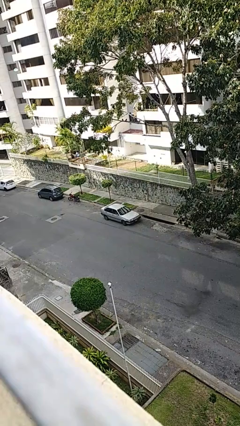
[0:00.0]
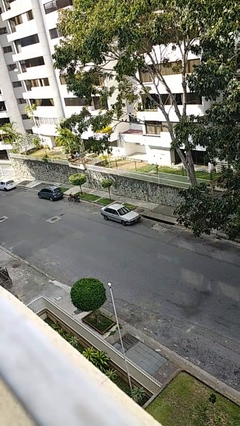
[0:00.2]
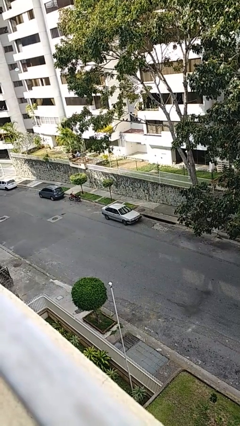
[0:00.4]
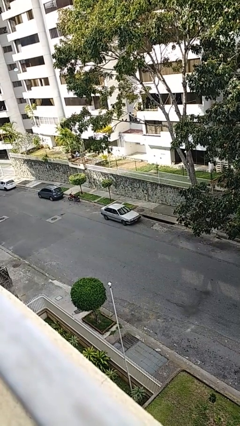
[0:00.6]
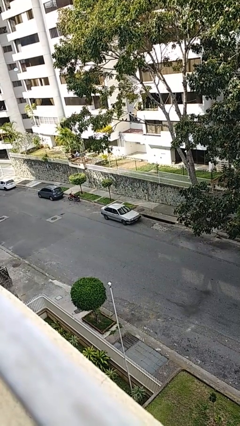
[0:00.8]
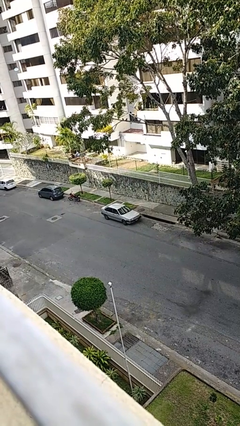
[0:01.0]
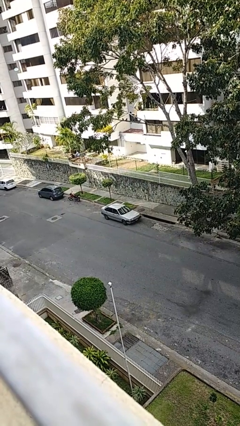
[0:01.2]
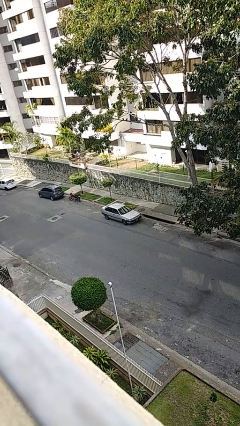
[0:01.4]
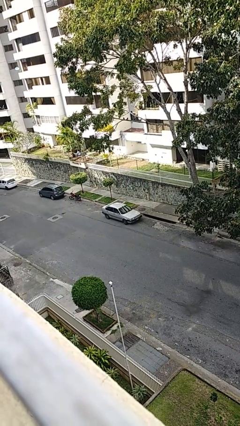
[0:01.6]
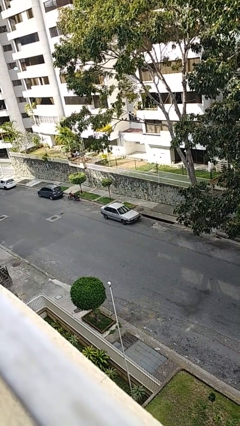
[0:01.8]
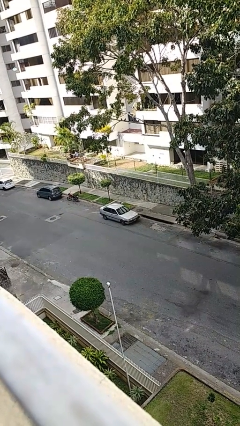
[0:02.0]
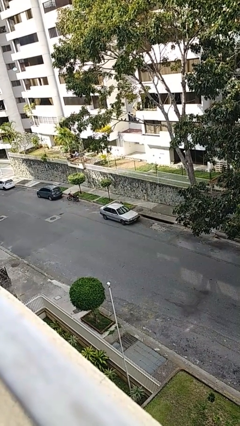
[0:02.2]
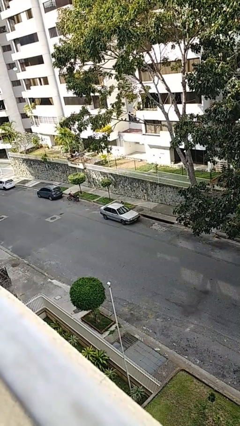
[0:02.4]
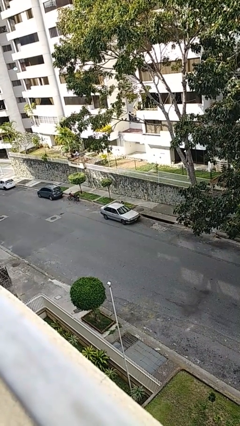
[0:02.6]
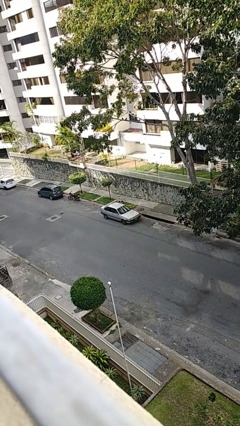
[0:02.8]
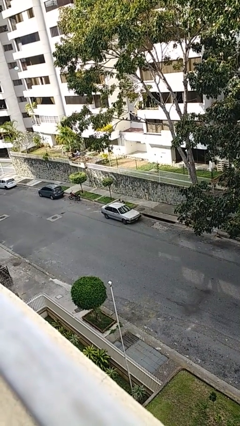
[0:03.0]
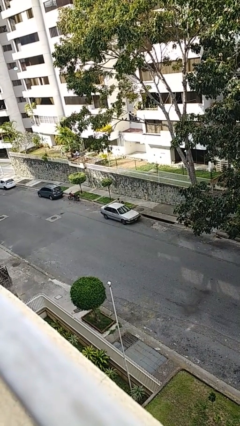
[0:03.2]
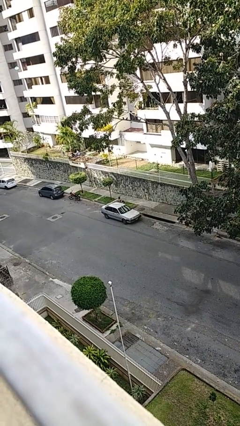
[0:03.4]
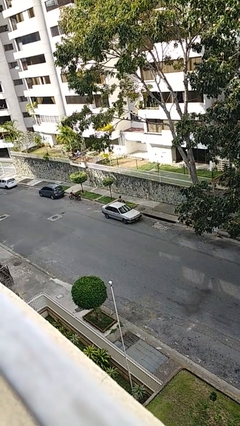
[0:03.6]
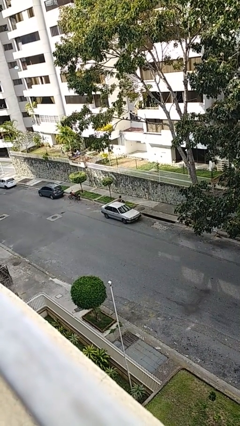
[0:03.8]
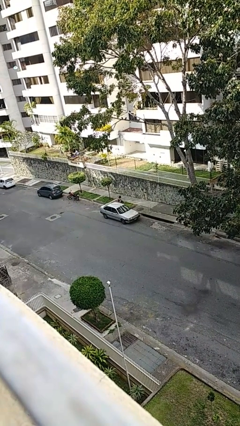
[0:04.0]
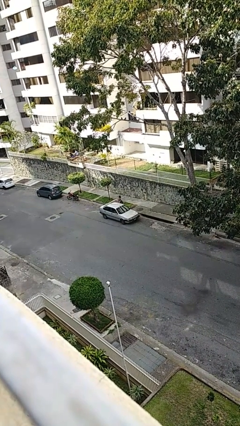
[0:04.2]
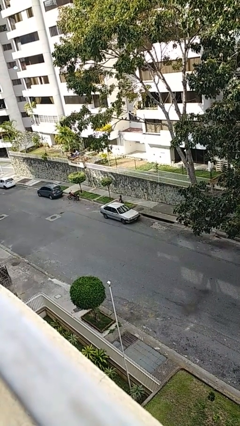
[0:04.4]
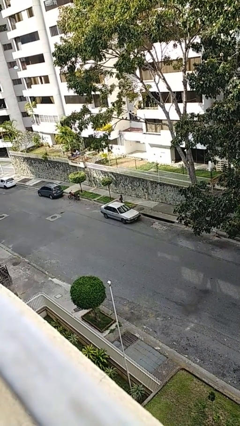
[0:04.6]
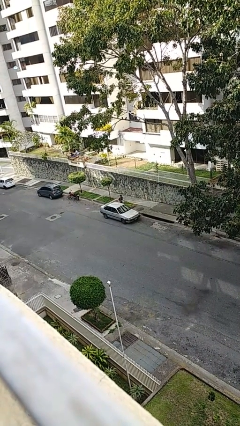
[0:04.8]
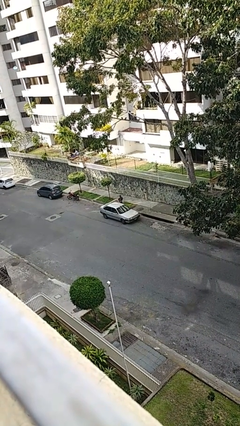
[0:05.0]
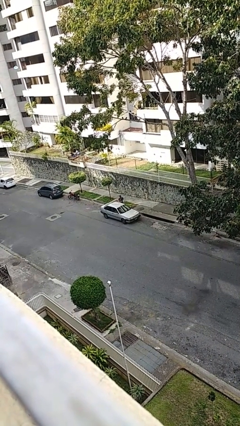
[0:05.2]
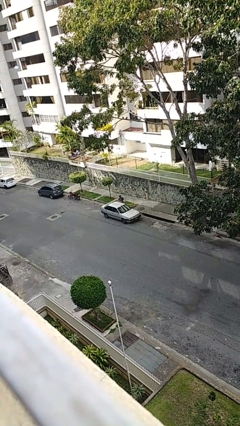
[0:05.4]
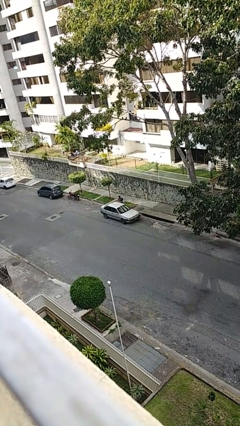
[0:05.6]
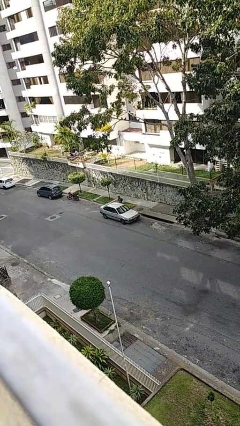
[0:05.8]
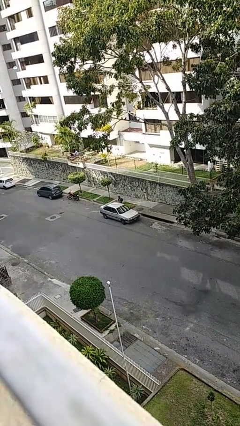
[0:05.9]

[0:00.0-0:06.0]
car drops off person

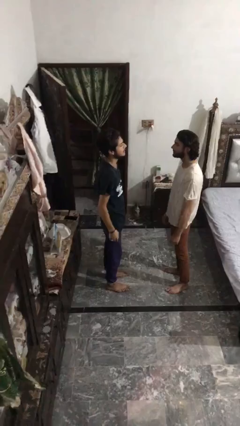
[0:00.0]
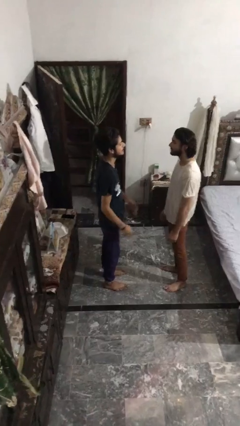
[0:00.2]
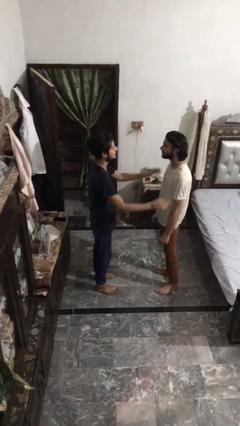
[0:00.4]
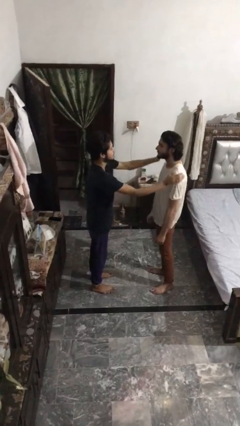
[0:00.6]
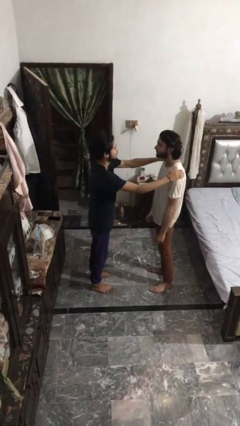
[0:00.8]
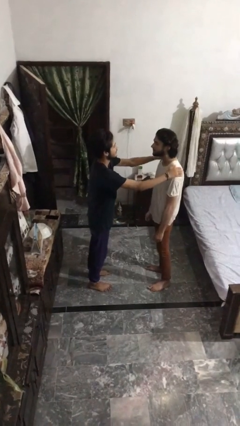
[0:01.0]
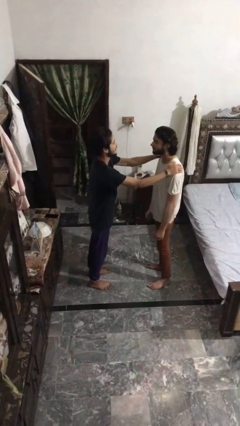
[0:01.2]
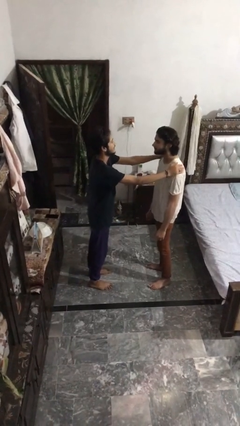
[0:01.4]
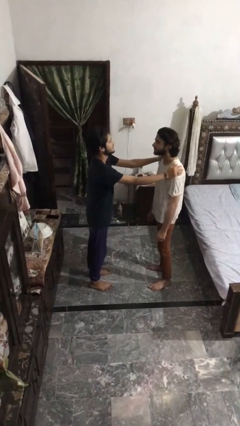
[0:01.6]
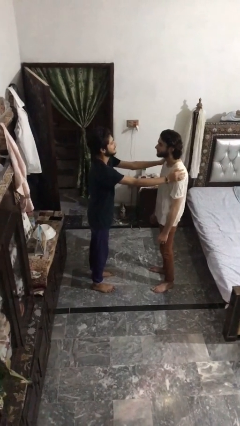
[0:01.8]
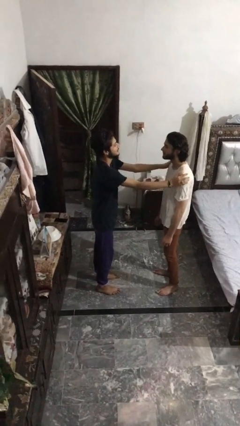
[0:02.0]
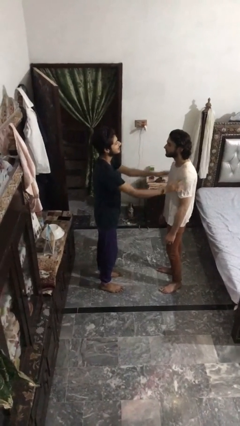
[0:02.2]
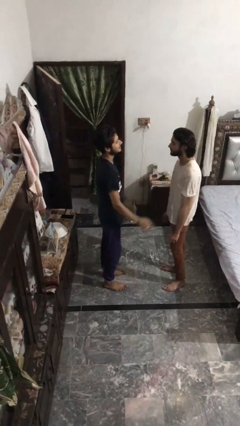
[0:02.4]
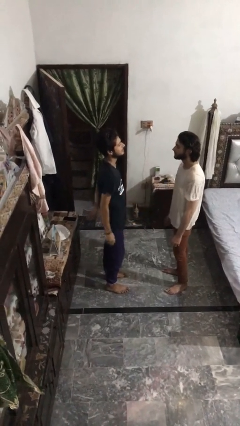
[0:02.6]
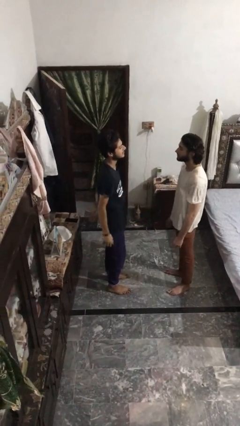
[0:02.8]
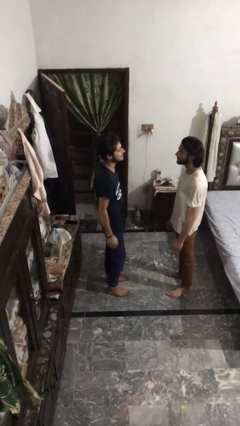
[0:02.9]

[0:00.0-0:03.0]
person pounds shoulders of person

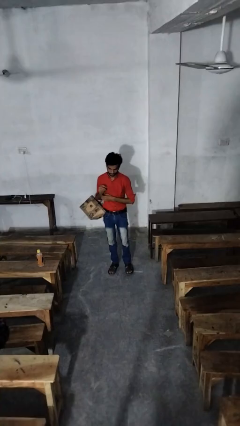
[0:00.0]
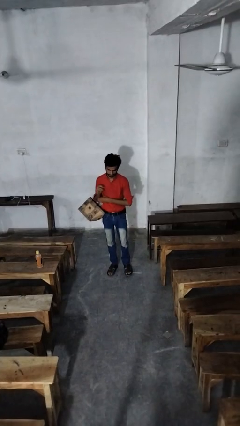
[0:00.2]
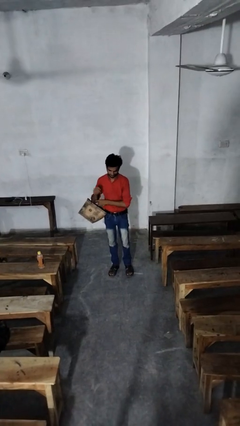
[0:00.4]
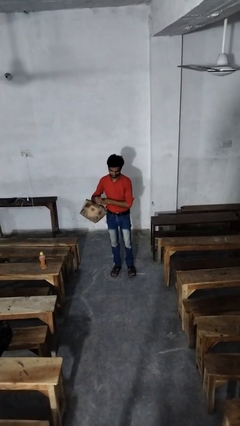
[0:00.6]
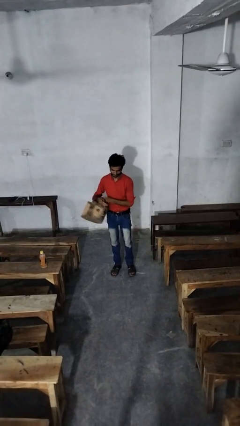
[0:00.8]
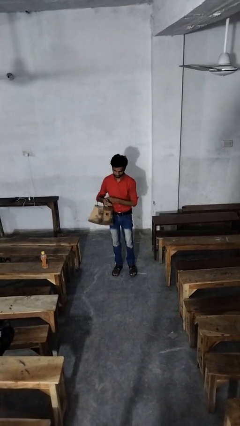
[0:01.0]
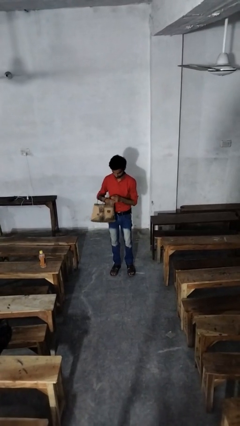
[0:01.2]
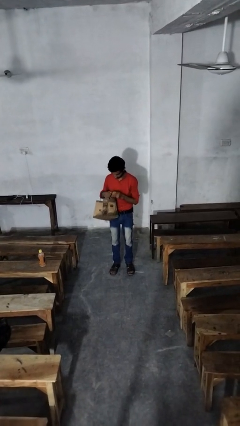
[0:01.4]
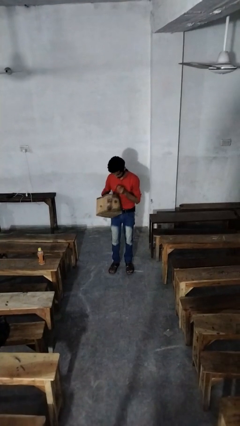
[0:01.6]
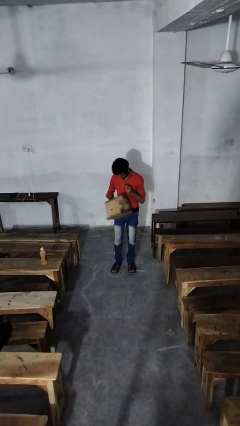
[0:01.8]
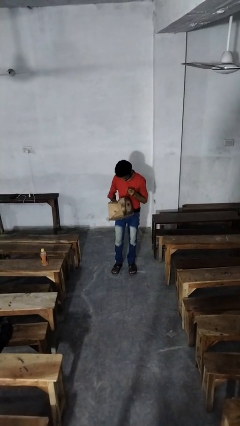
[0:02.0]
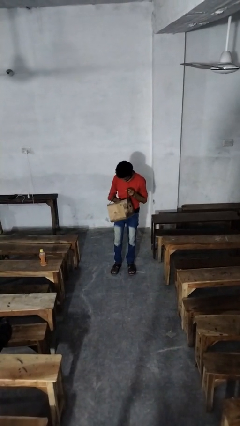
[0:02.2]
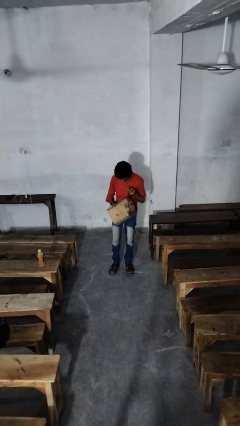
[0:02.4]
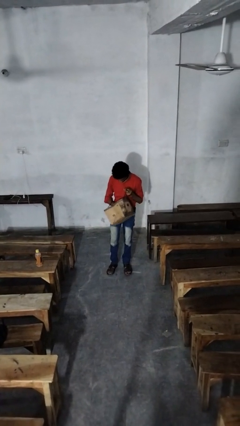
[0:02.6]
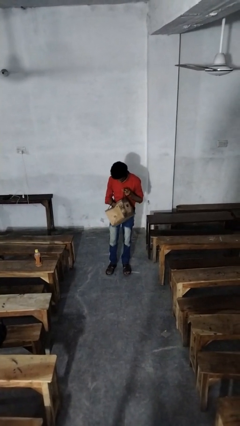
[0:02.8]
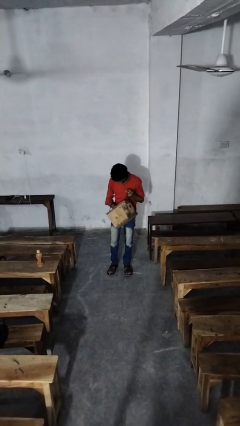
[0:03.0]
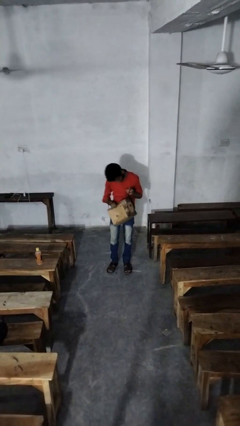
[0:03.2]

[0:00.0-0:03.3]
person searches in purse

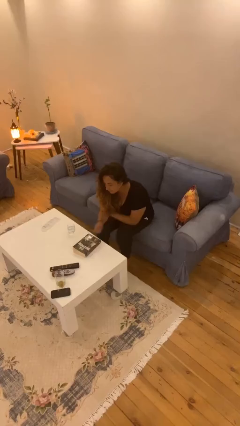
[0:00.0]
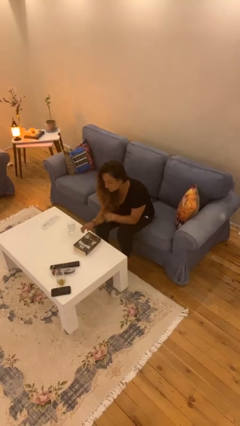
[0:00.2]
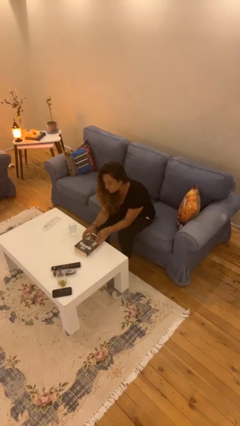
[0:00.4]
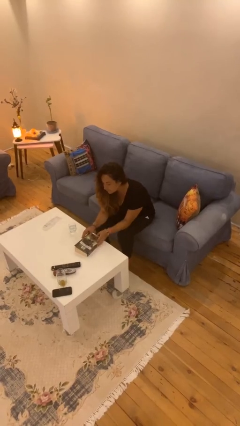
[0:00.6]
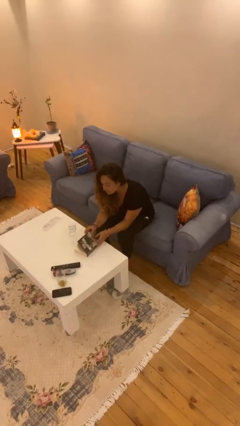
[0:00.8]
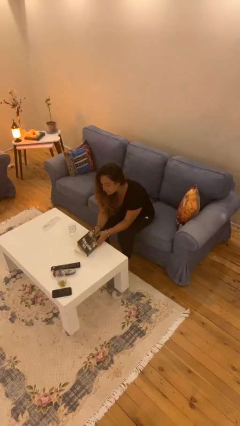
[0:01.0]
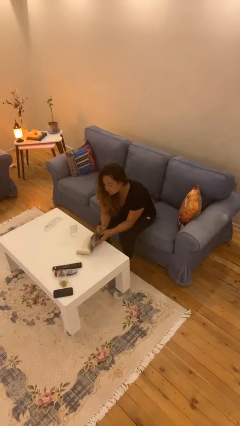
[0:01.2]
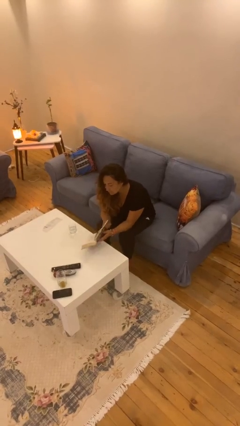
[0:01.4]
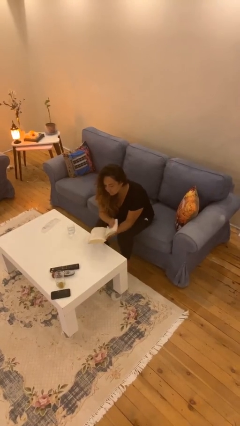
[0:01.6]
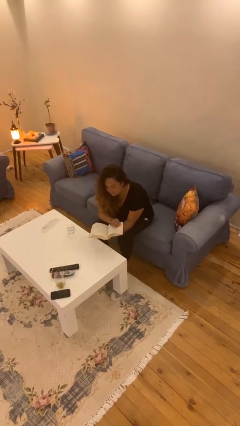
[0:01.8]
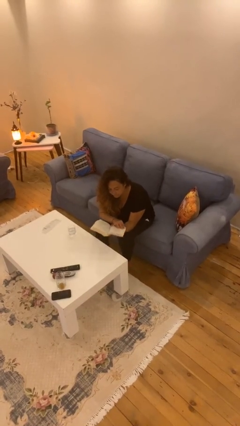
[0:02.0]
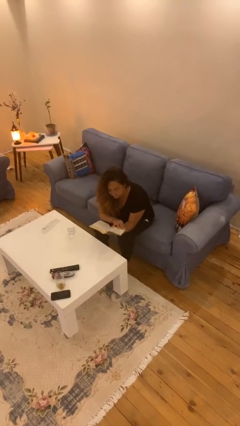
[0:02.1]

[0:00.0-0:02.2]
person picks up object from table

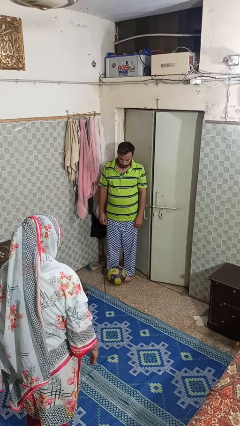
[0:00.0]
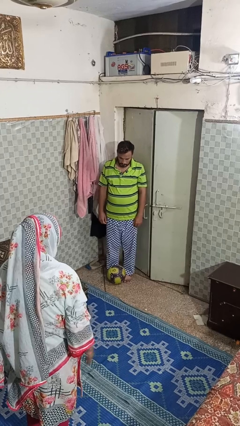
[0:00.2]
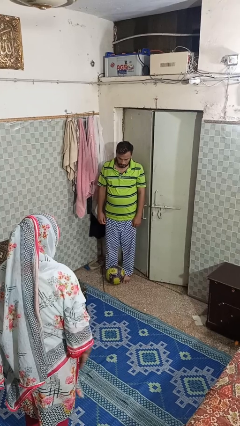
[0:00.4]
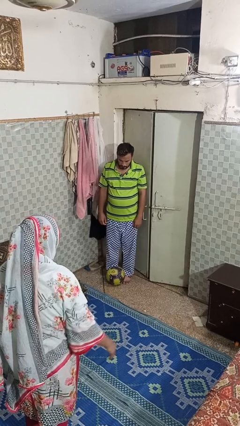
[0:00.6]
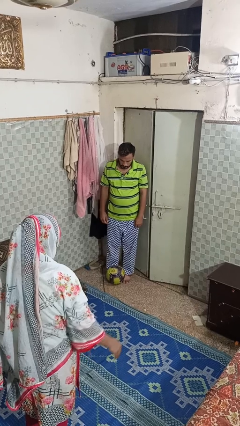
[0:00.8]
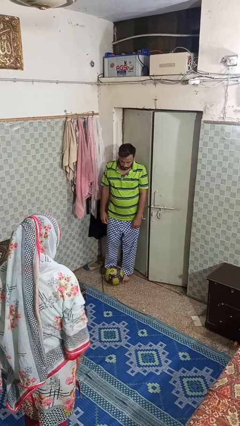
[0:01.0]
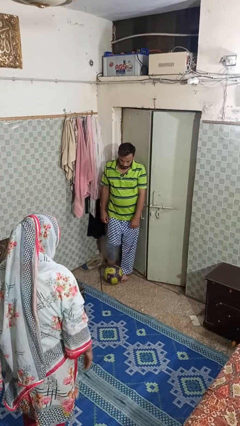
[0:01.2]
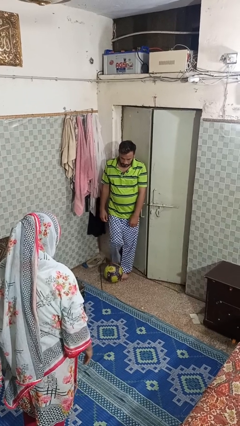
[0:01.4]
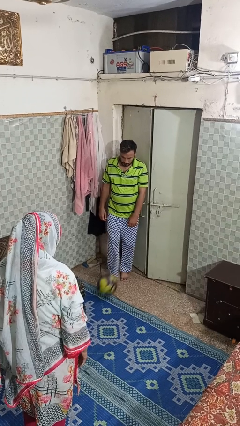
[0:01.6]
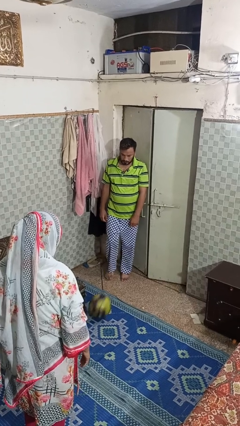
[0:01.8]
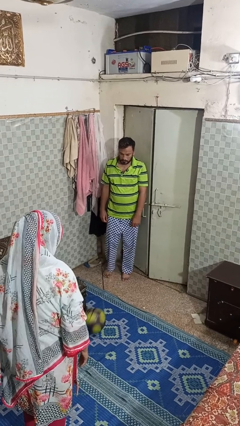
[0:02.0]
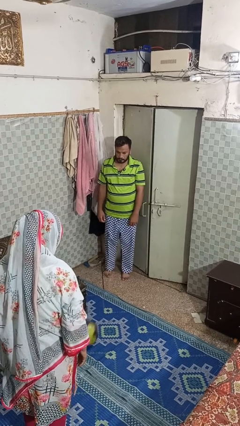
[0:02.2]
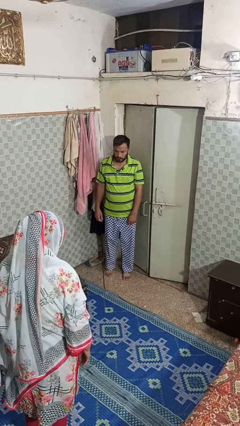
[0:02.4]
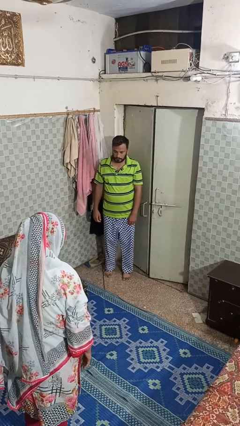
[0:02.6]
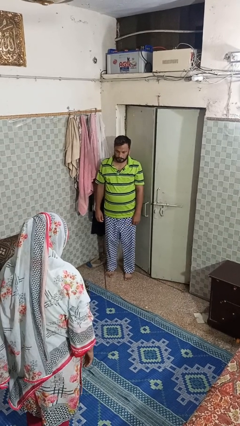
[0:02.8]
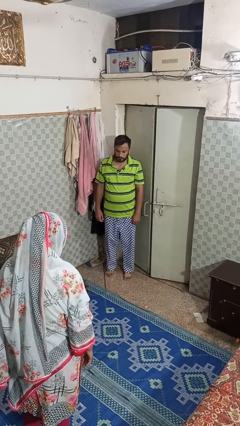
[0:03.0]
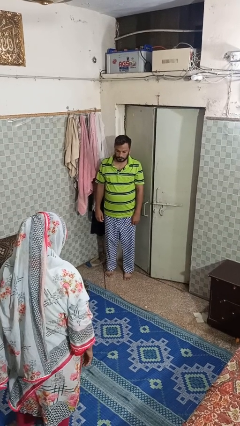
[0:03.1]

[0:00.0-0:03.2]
person kicks object to person
